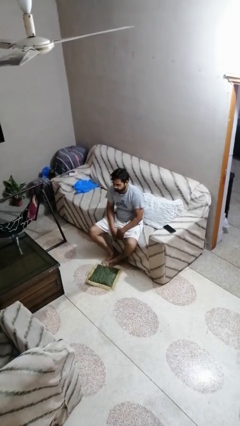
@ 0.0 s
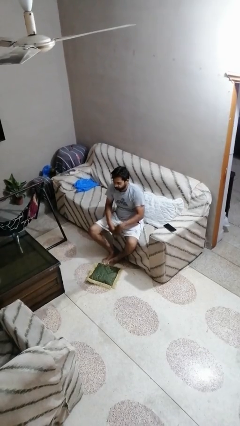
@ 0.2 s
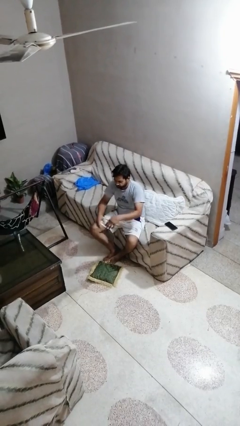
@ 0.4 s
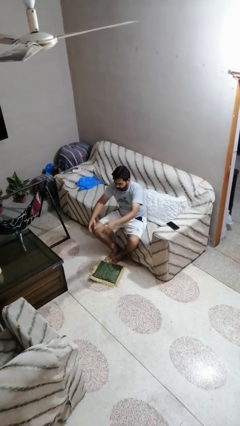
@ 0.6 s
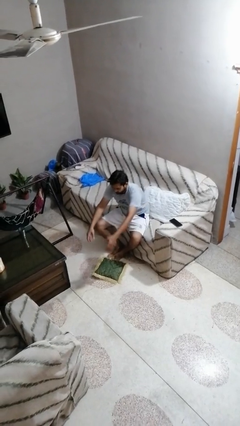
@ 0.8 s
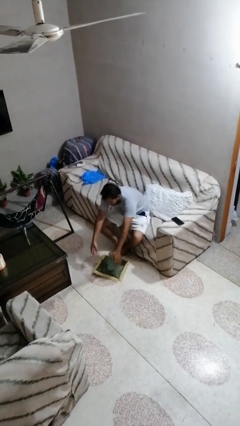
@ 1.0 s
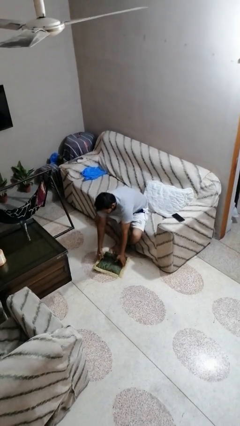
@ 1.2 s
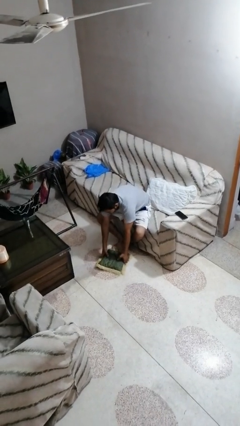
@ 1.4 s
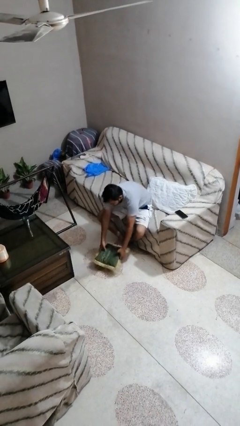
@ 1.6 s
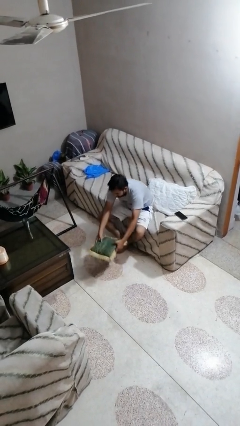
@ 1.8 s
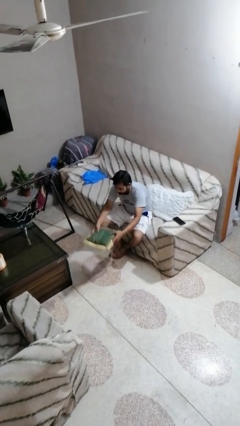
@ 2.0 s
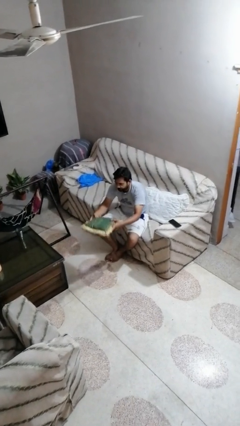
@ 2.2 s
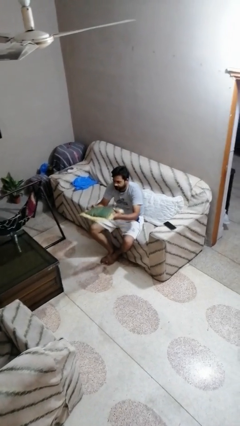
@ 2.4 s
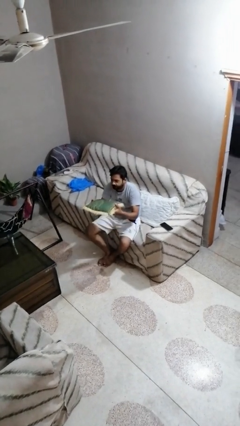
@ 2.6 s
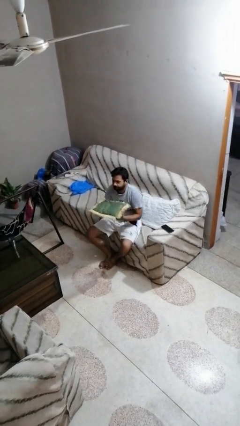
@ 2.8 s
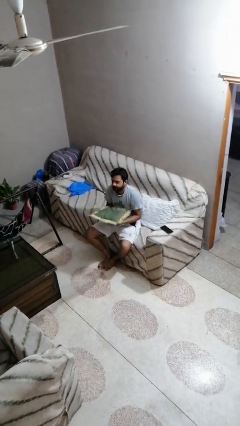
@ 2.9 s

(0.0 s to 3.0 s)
person picks up object from floor

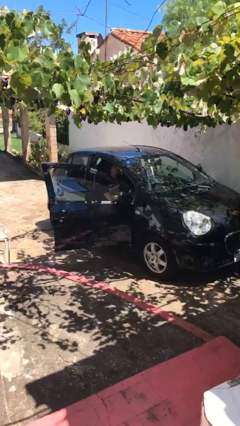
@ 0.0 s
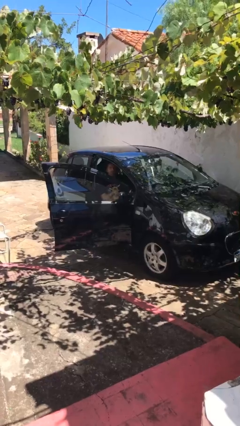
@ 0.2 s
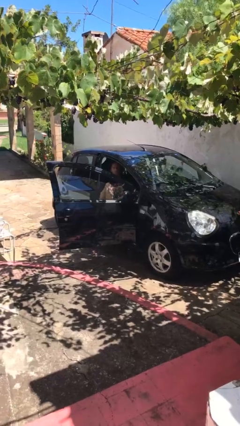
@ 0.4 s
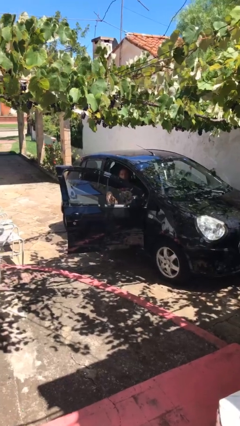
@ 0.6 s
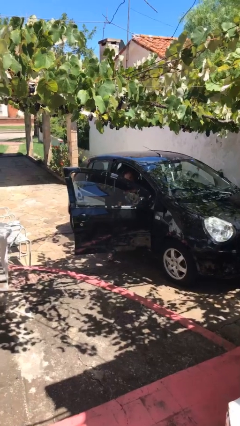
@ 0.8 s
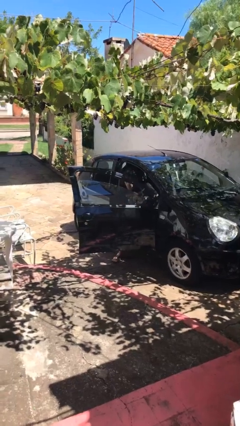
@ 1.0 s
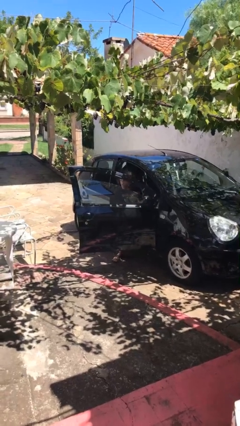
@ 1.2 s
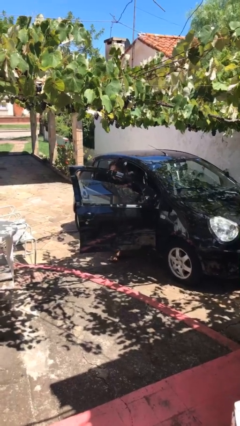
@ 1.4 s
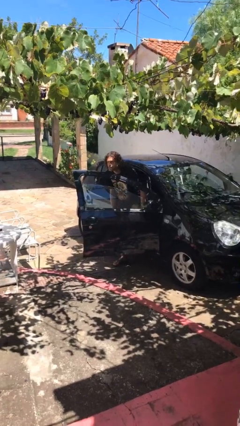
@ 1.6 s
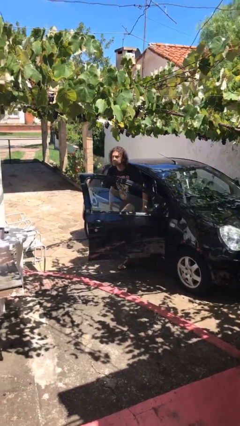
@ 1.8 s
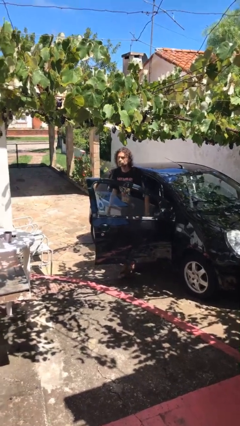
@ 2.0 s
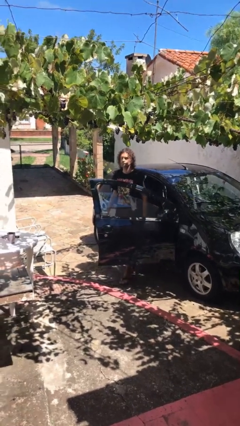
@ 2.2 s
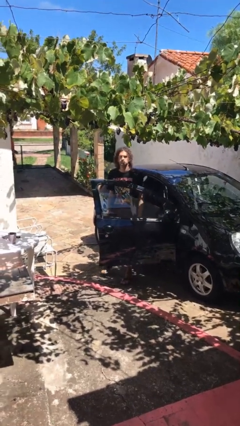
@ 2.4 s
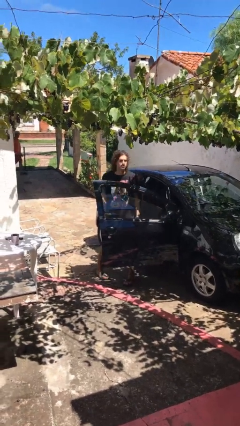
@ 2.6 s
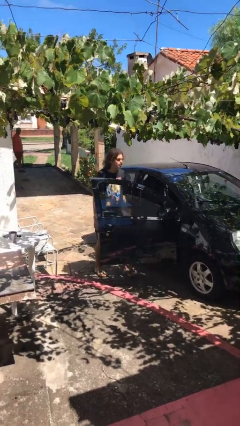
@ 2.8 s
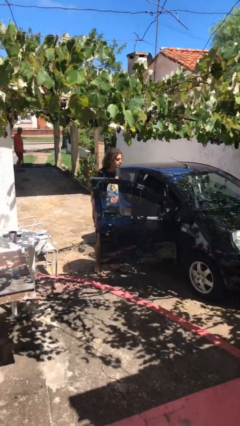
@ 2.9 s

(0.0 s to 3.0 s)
person exits car

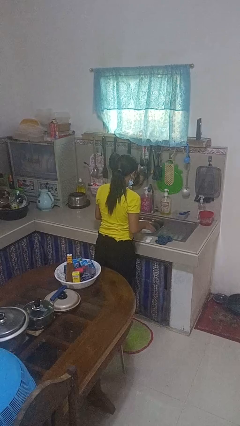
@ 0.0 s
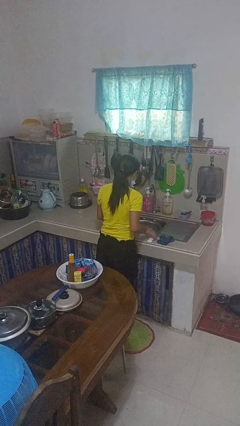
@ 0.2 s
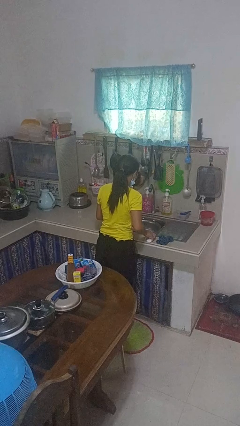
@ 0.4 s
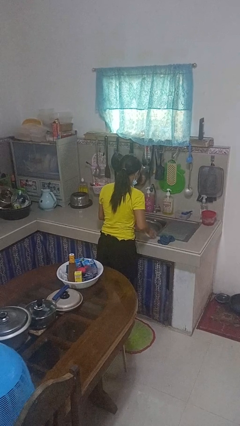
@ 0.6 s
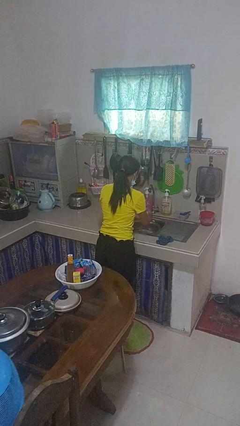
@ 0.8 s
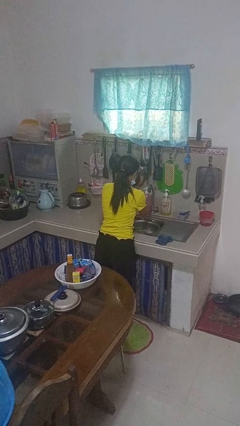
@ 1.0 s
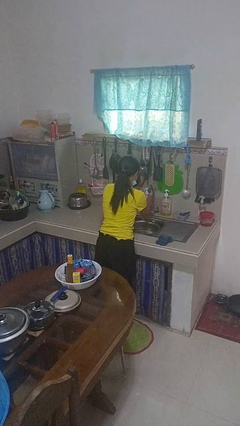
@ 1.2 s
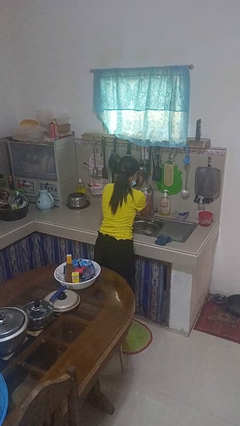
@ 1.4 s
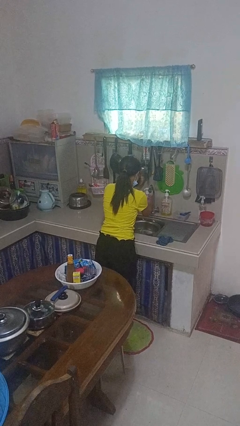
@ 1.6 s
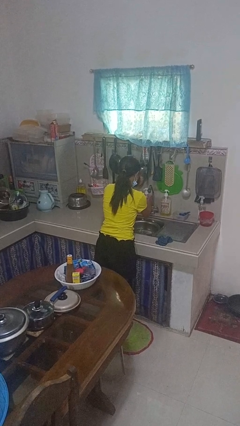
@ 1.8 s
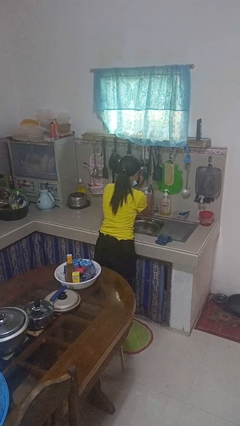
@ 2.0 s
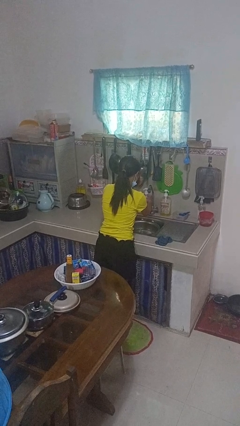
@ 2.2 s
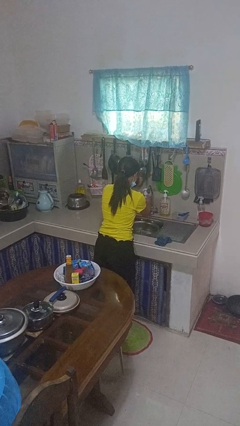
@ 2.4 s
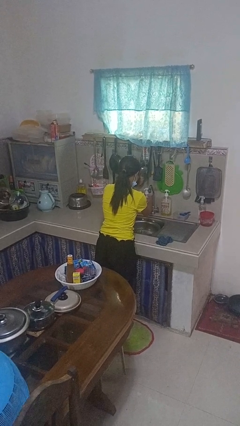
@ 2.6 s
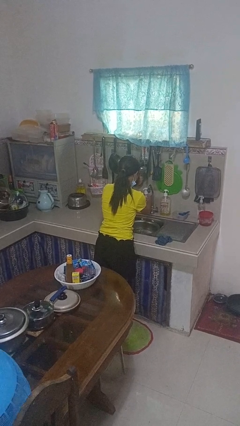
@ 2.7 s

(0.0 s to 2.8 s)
person washes hands

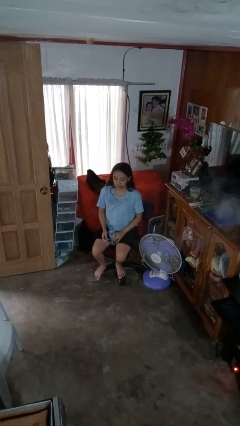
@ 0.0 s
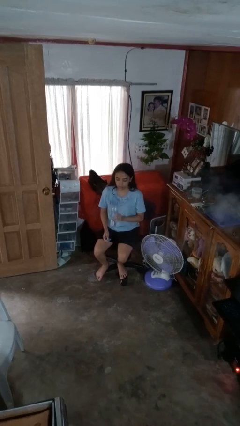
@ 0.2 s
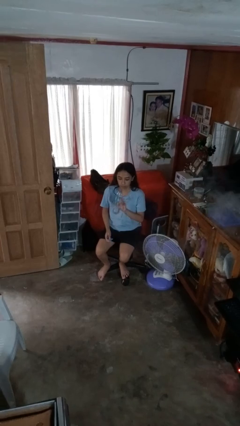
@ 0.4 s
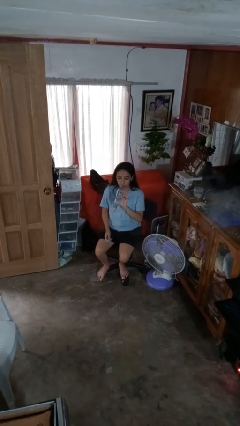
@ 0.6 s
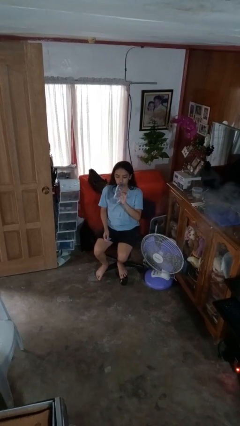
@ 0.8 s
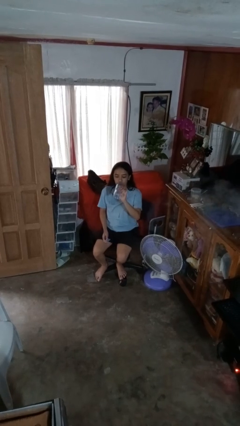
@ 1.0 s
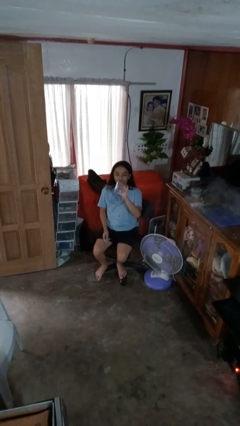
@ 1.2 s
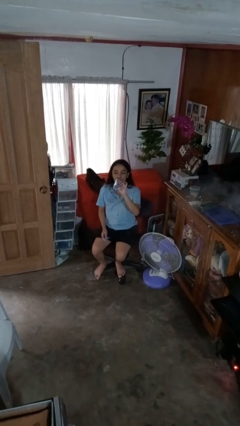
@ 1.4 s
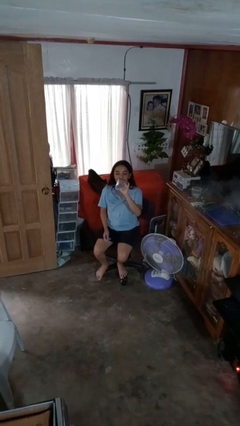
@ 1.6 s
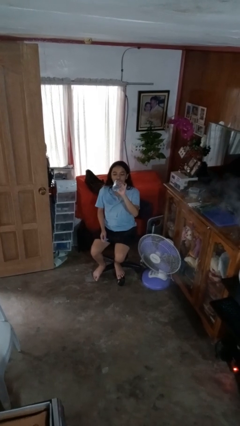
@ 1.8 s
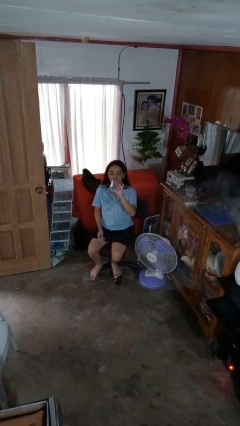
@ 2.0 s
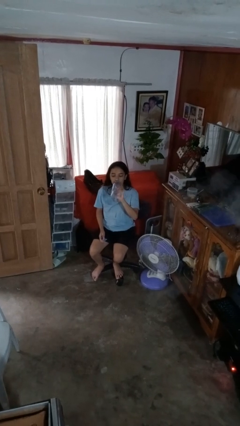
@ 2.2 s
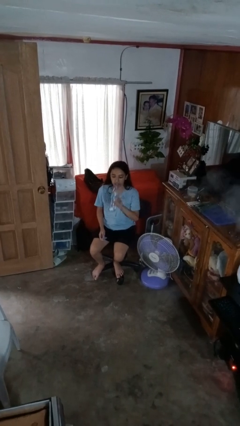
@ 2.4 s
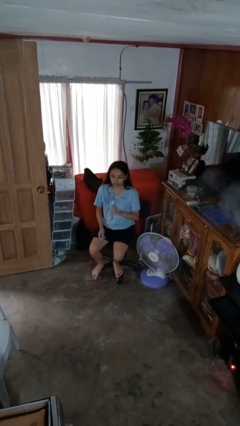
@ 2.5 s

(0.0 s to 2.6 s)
person drinks from bottle

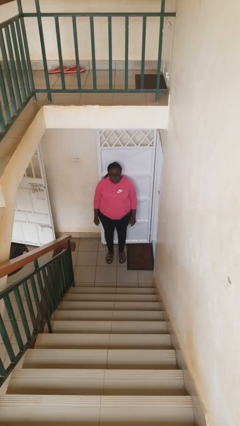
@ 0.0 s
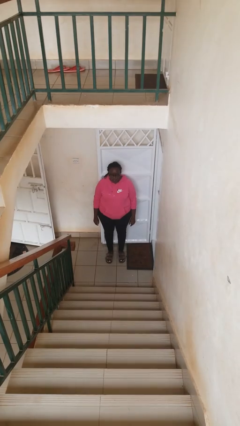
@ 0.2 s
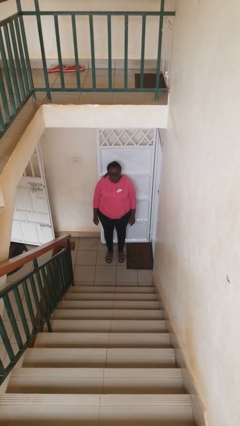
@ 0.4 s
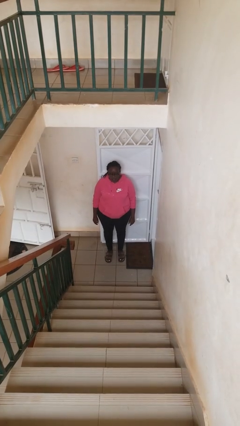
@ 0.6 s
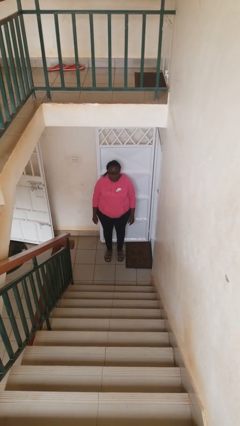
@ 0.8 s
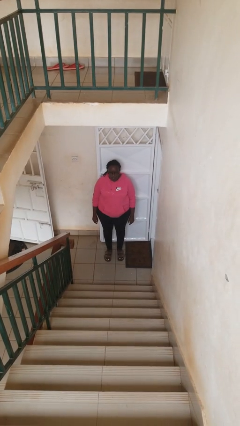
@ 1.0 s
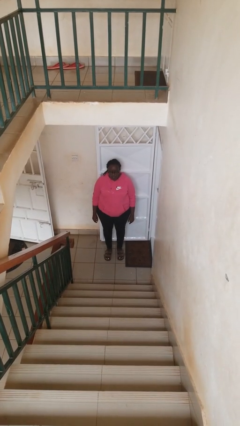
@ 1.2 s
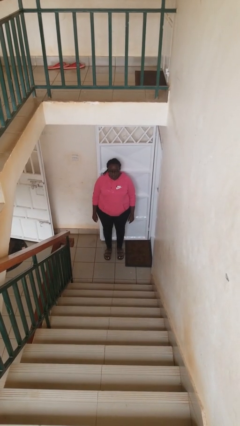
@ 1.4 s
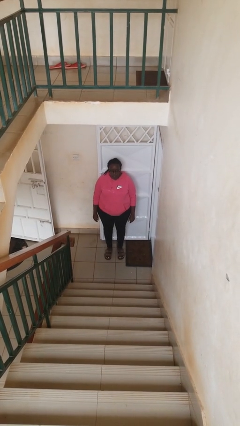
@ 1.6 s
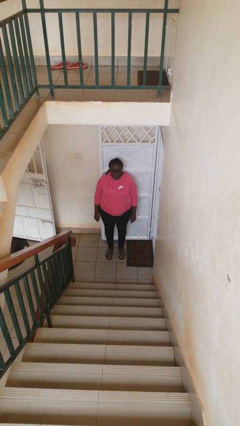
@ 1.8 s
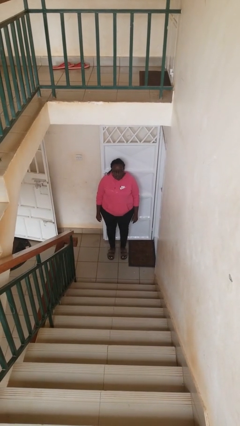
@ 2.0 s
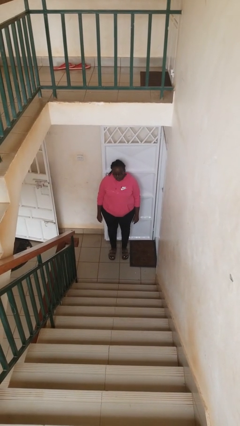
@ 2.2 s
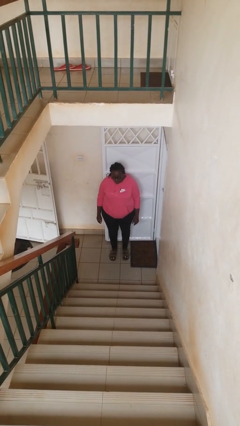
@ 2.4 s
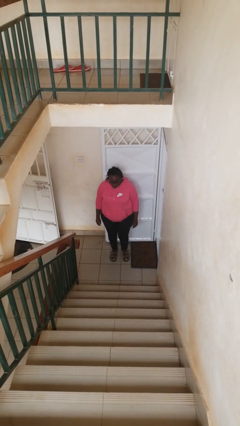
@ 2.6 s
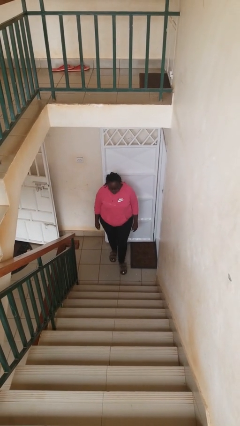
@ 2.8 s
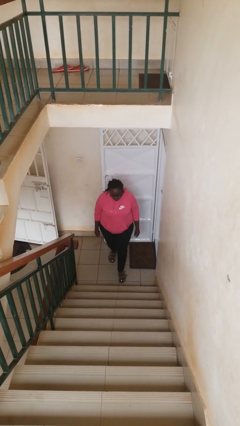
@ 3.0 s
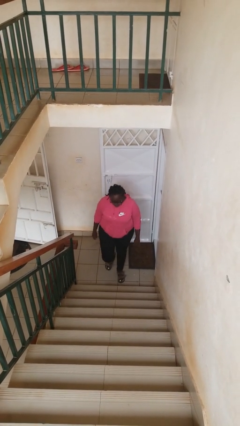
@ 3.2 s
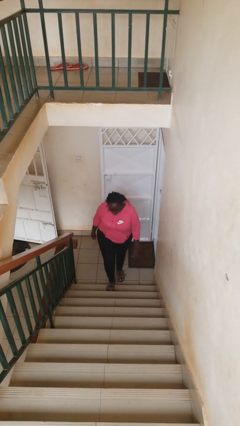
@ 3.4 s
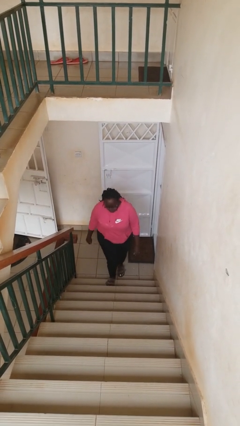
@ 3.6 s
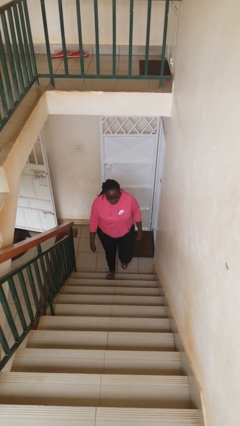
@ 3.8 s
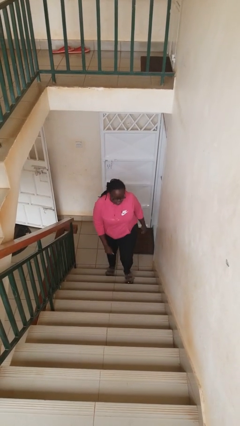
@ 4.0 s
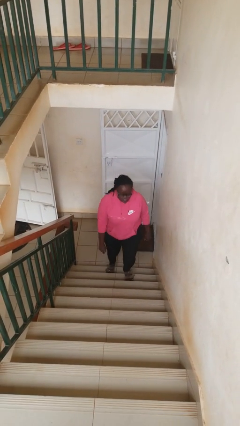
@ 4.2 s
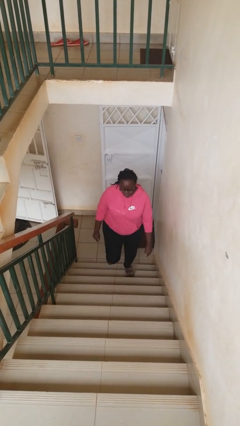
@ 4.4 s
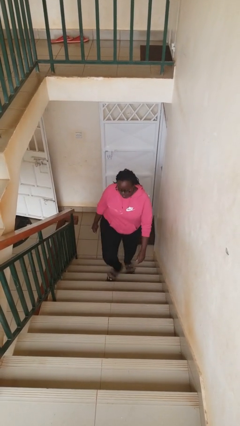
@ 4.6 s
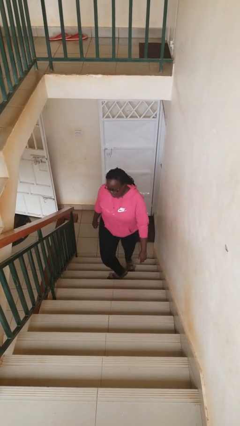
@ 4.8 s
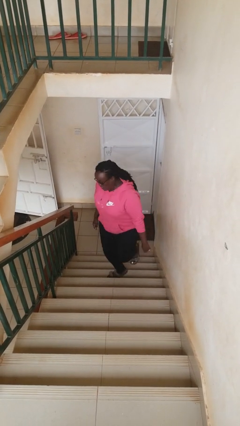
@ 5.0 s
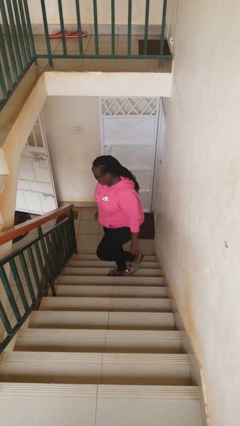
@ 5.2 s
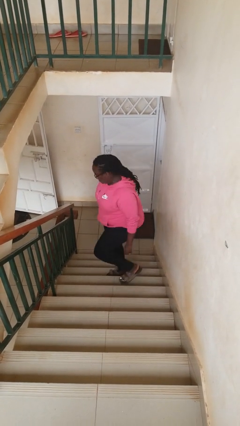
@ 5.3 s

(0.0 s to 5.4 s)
person climbs up stairs

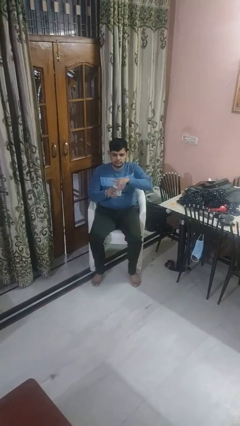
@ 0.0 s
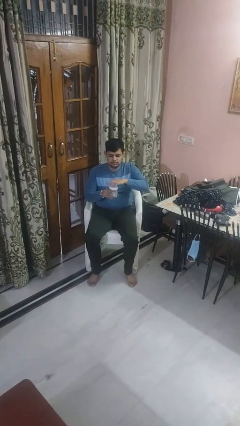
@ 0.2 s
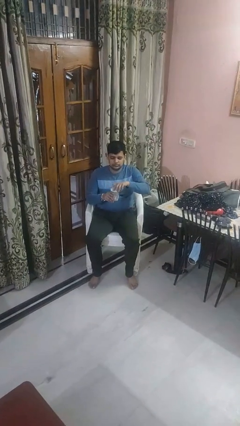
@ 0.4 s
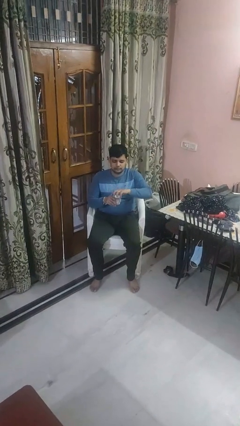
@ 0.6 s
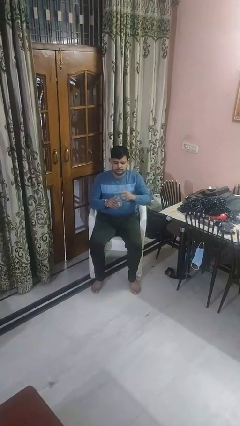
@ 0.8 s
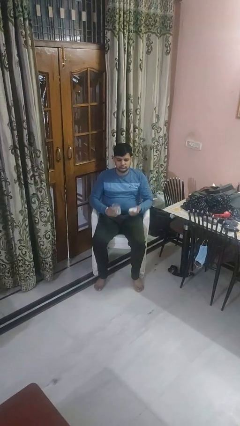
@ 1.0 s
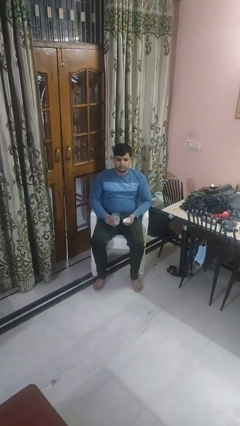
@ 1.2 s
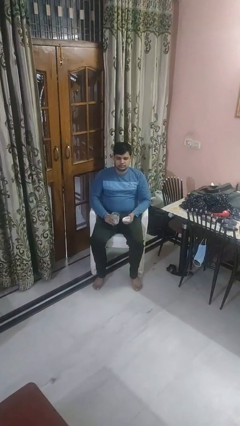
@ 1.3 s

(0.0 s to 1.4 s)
person opens jar
